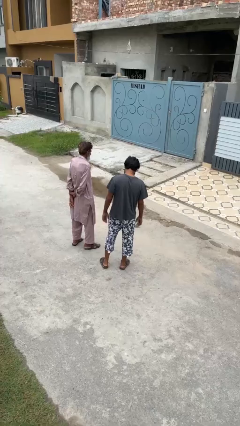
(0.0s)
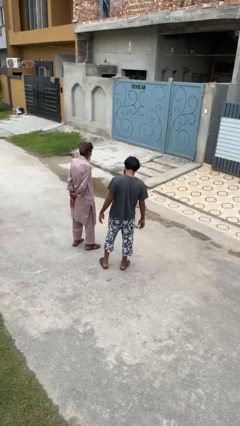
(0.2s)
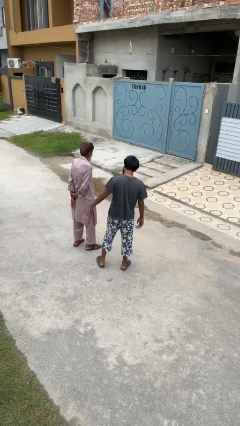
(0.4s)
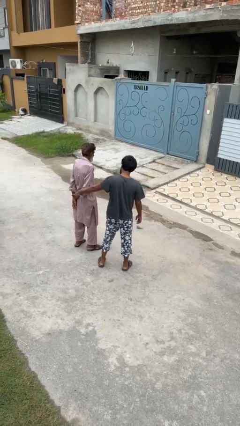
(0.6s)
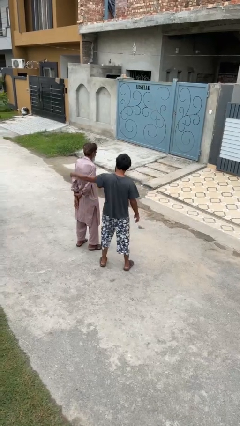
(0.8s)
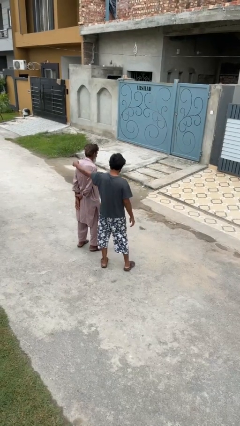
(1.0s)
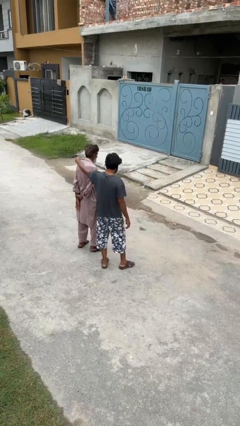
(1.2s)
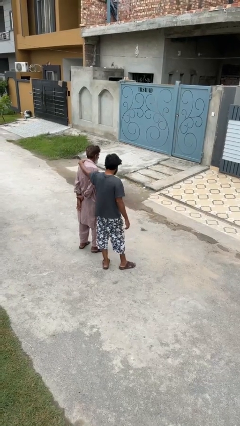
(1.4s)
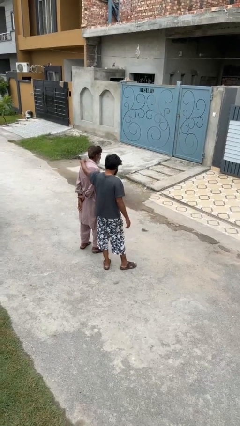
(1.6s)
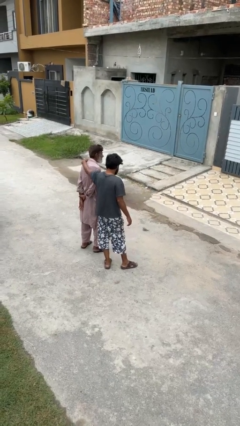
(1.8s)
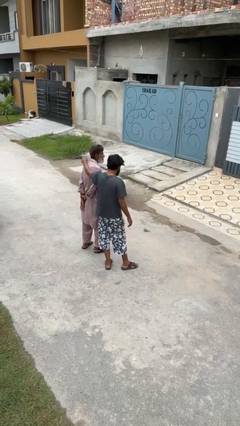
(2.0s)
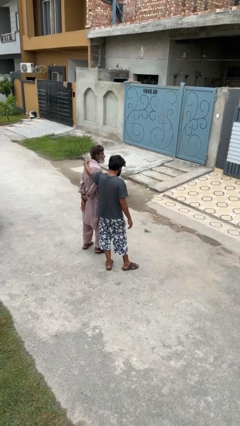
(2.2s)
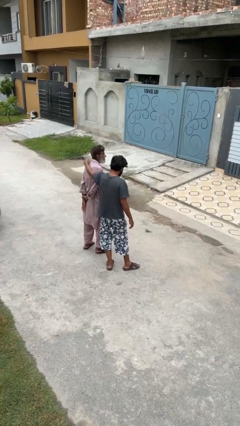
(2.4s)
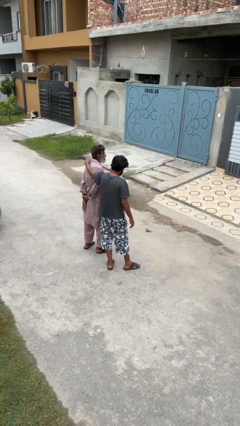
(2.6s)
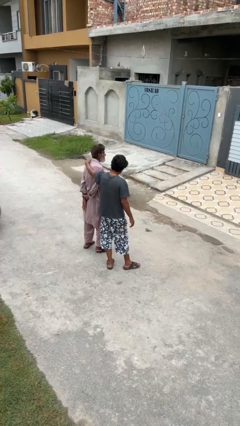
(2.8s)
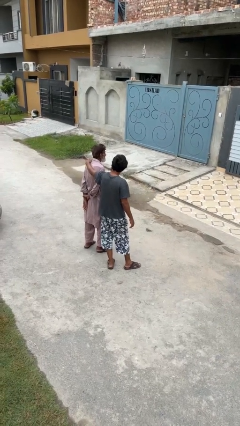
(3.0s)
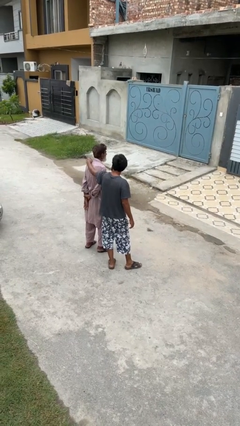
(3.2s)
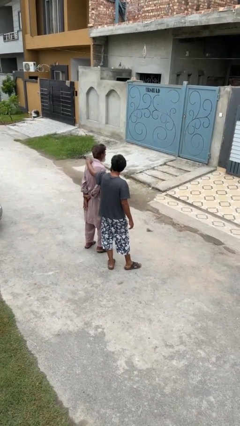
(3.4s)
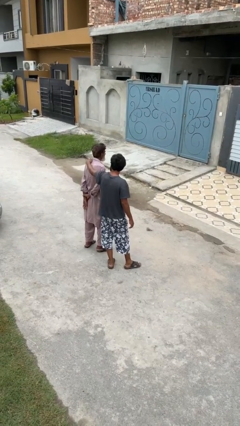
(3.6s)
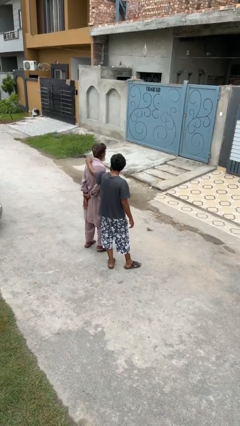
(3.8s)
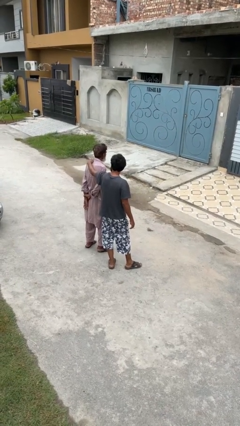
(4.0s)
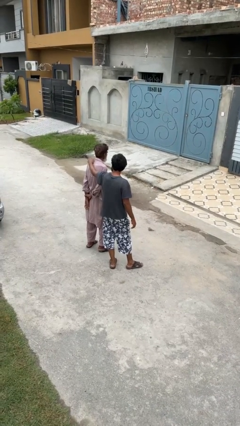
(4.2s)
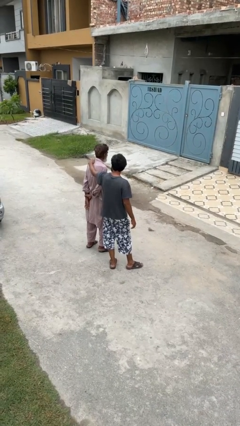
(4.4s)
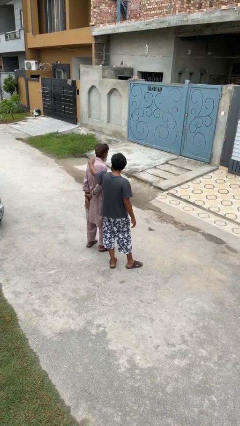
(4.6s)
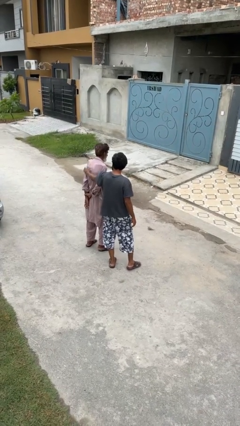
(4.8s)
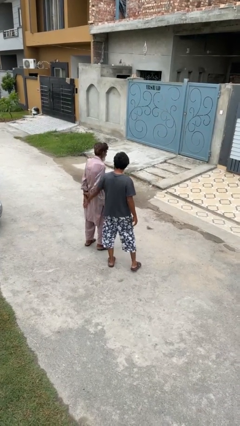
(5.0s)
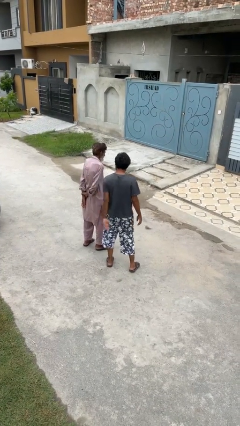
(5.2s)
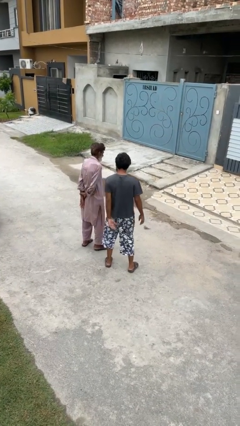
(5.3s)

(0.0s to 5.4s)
person pounds shoulders of person

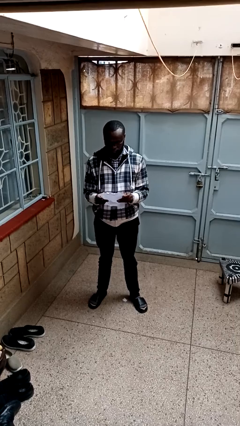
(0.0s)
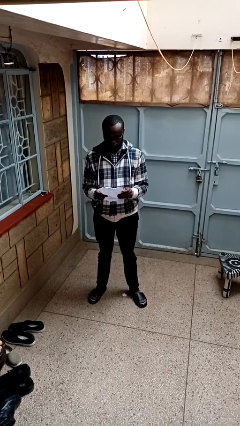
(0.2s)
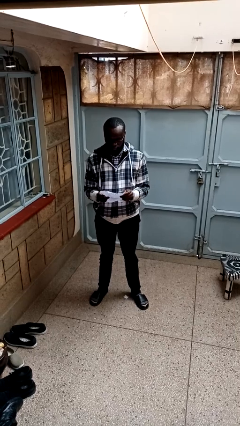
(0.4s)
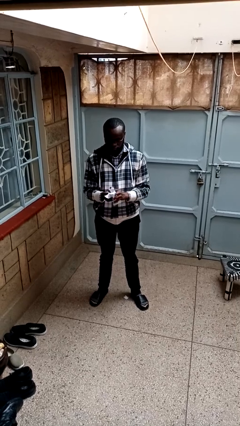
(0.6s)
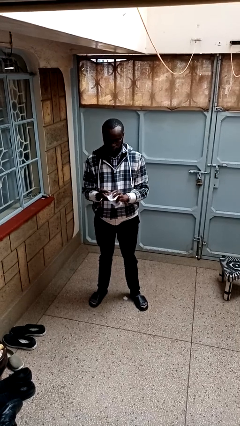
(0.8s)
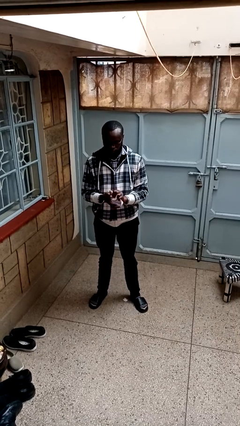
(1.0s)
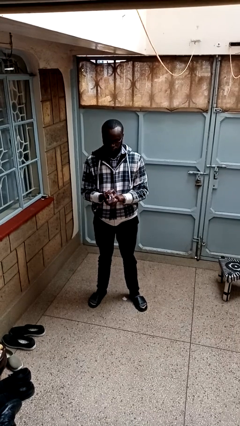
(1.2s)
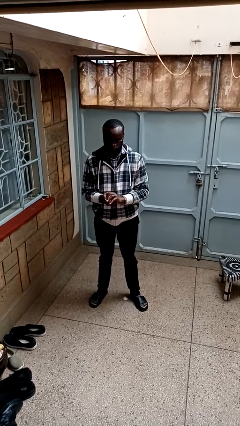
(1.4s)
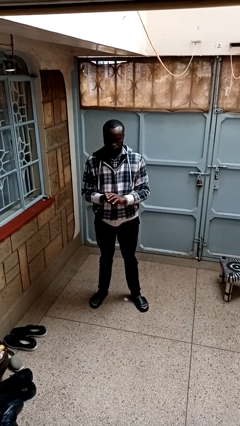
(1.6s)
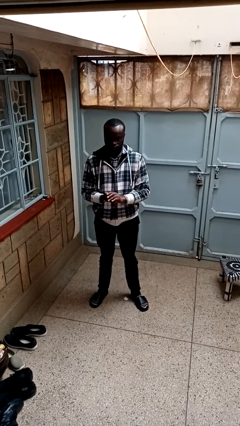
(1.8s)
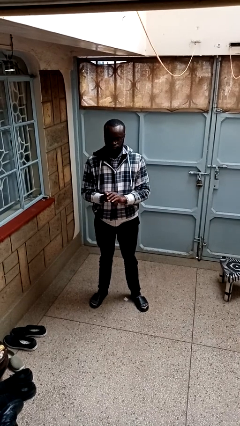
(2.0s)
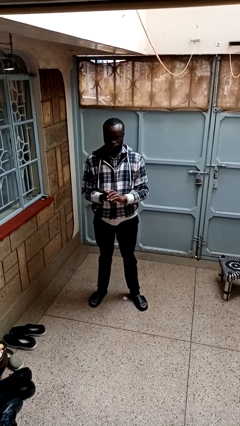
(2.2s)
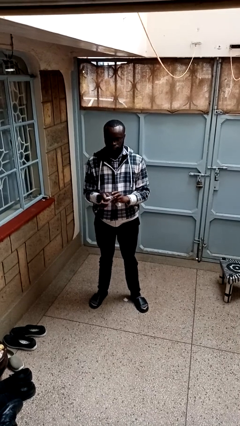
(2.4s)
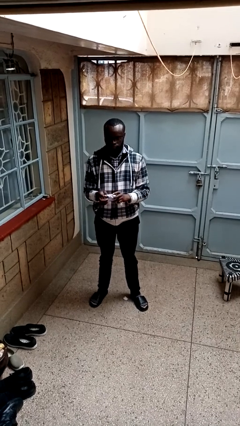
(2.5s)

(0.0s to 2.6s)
person crumples paper

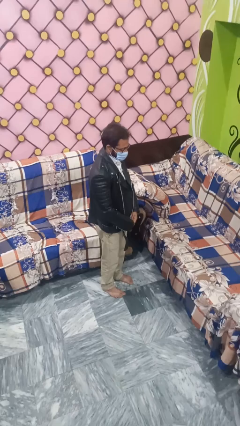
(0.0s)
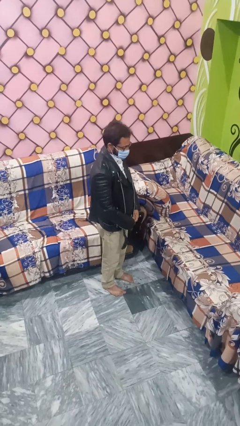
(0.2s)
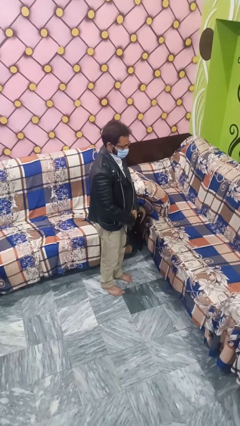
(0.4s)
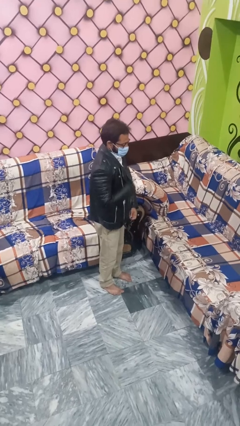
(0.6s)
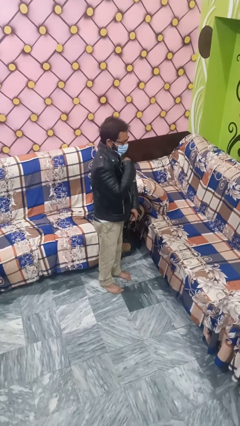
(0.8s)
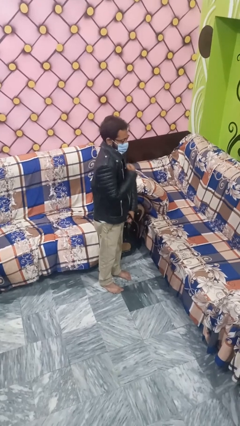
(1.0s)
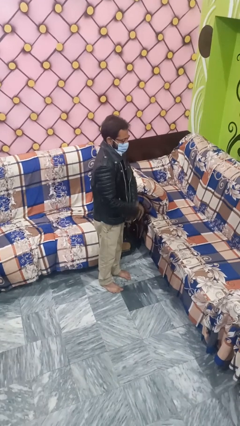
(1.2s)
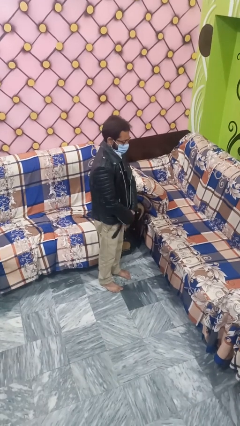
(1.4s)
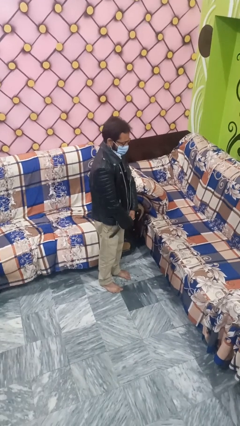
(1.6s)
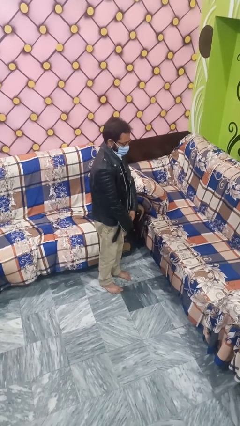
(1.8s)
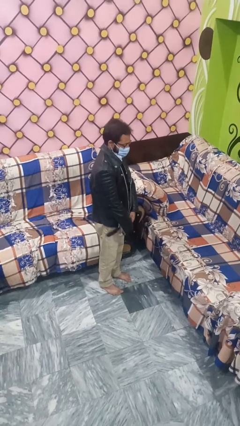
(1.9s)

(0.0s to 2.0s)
person zips up jacket

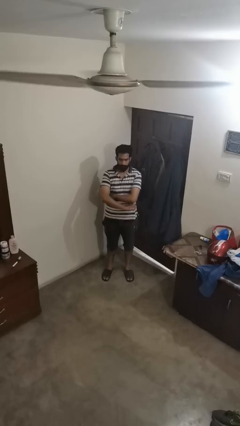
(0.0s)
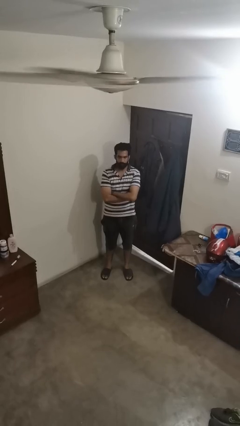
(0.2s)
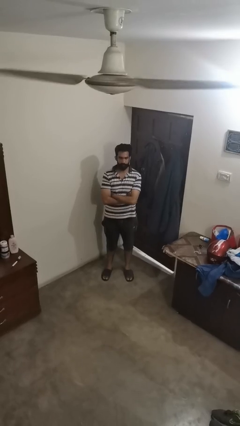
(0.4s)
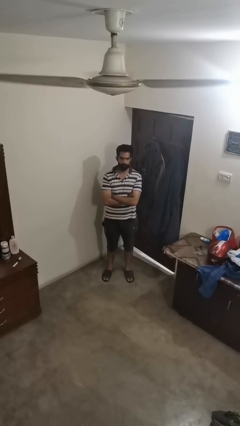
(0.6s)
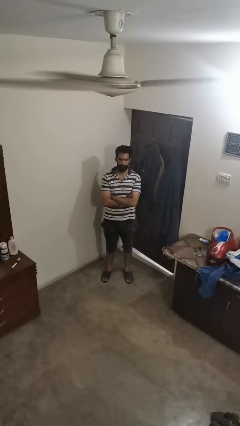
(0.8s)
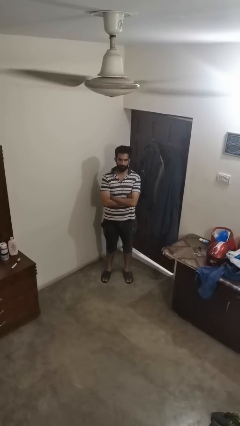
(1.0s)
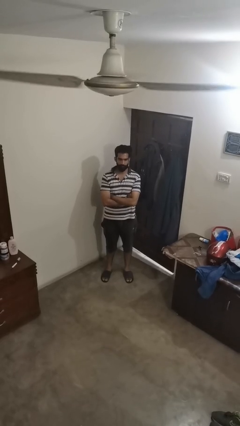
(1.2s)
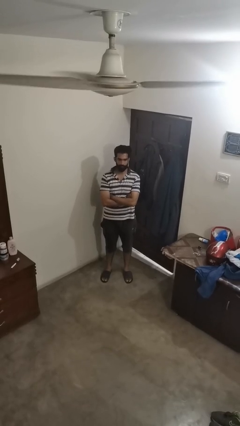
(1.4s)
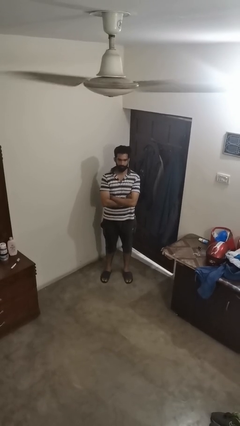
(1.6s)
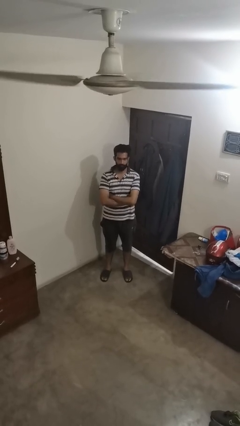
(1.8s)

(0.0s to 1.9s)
person crosses arms

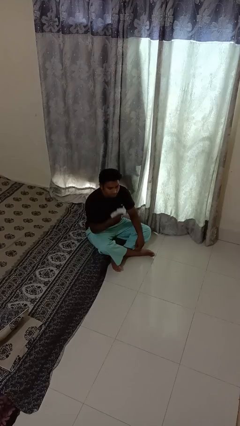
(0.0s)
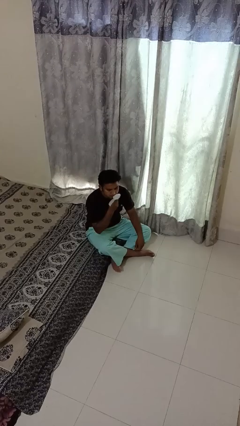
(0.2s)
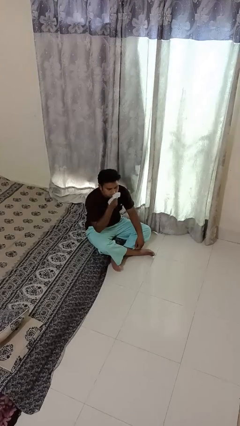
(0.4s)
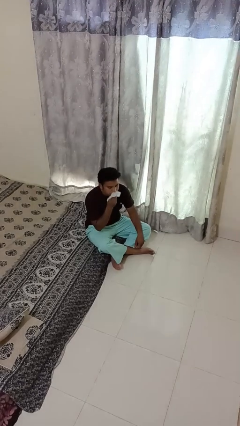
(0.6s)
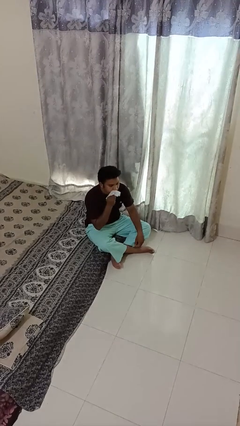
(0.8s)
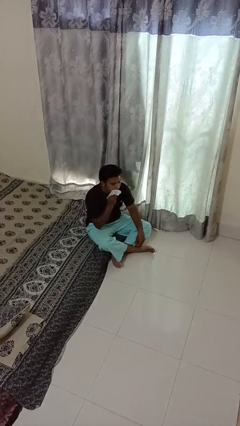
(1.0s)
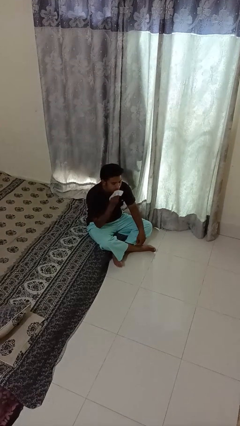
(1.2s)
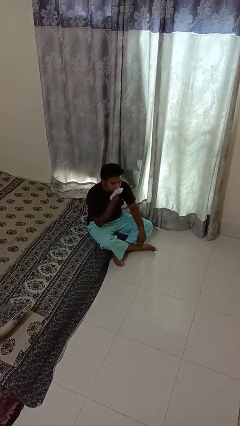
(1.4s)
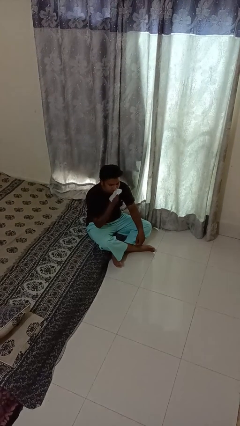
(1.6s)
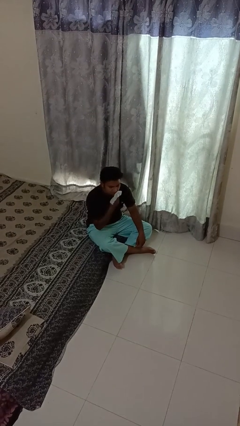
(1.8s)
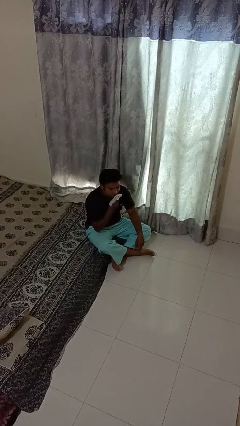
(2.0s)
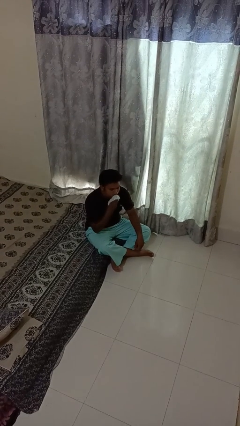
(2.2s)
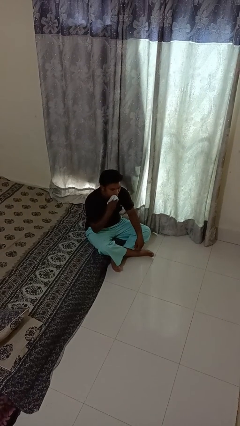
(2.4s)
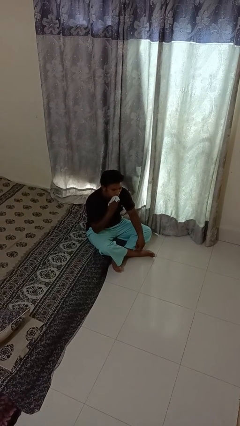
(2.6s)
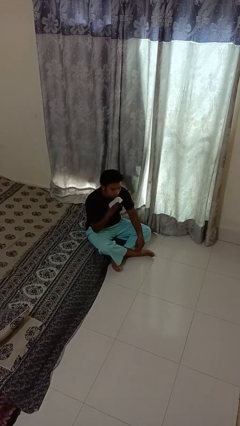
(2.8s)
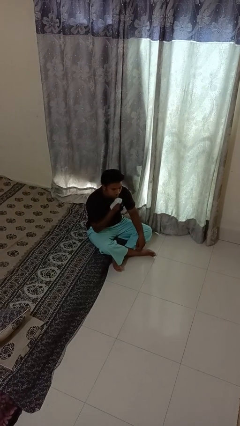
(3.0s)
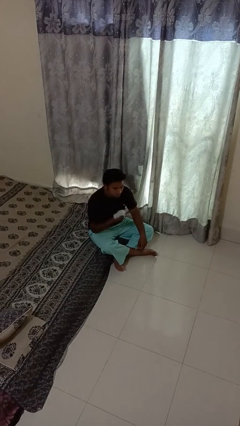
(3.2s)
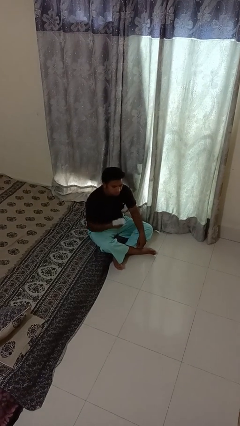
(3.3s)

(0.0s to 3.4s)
person wipes mouth with napkin

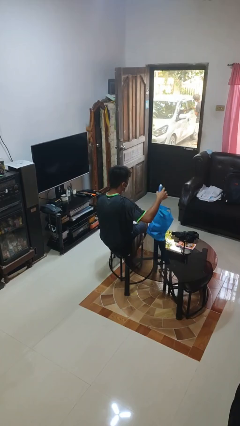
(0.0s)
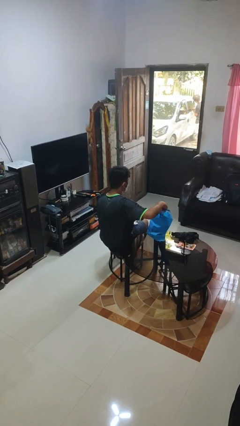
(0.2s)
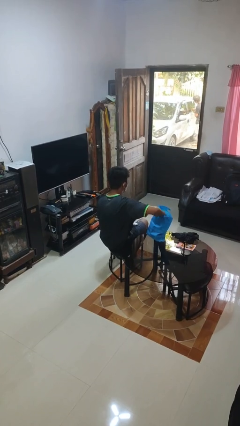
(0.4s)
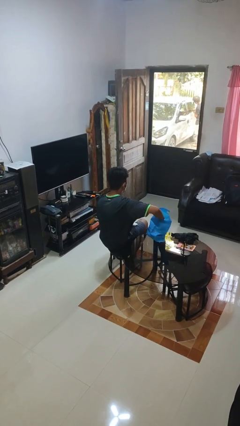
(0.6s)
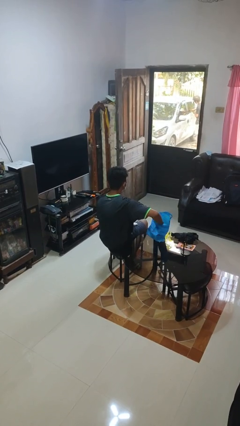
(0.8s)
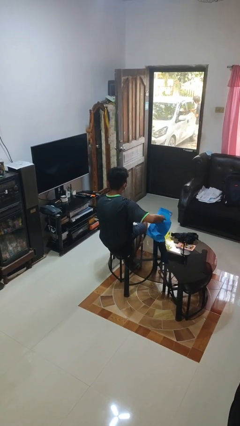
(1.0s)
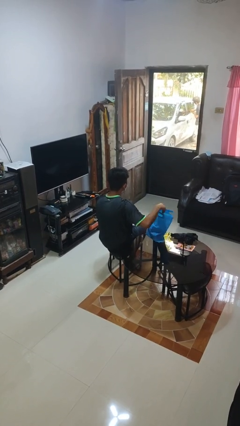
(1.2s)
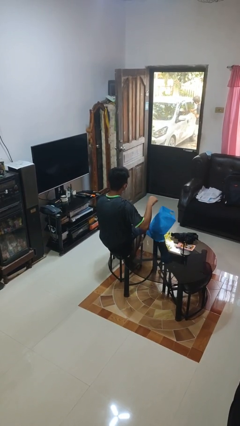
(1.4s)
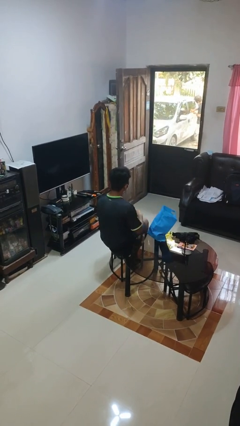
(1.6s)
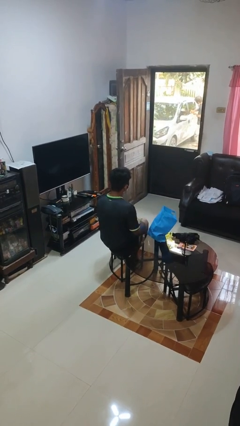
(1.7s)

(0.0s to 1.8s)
person puts object into bag

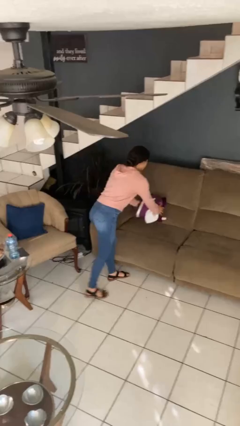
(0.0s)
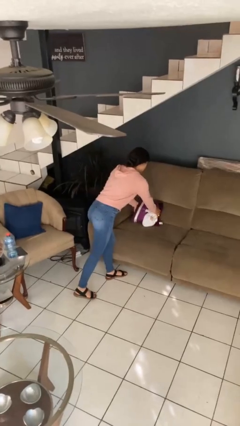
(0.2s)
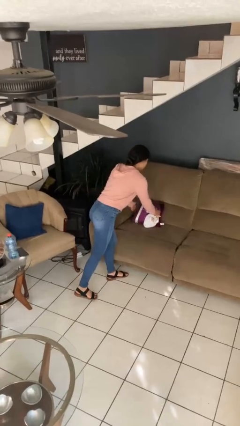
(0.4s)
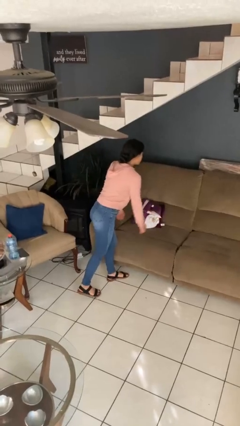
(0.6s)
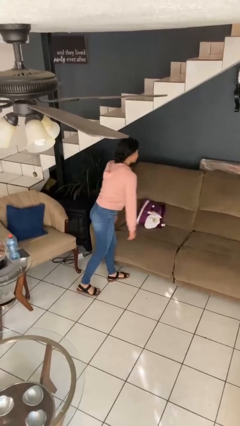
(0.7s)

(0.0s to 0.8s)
person puts down object on couch
